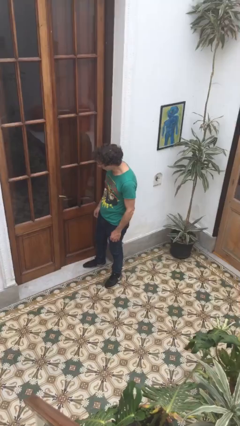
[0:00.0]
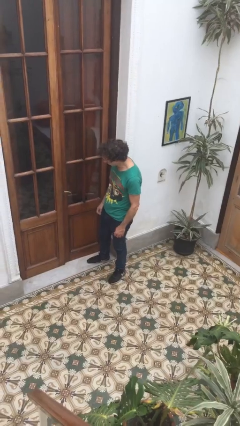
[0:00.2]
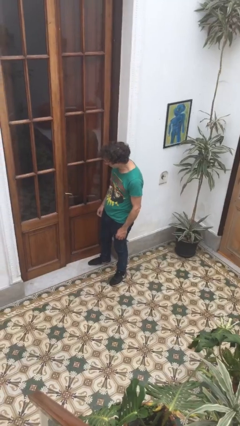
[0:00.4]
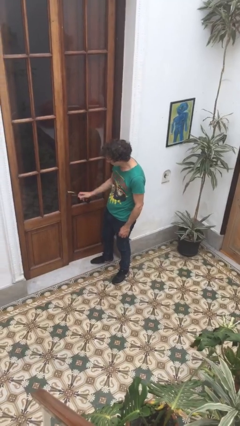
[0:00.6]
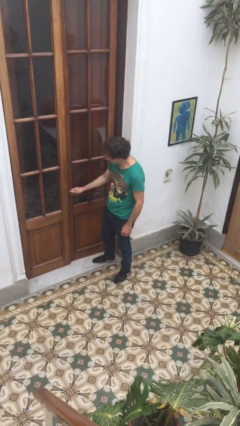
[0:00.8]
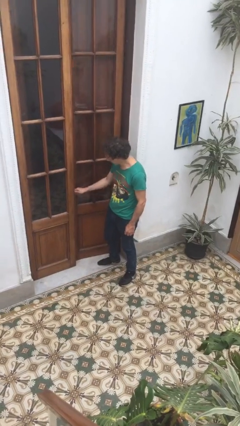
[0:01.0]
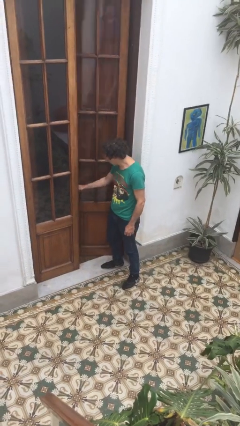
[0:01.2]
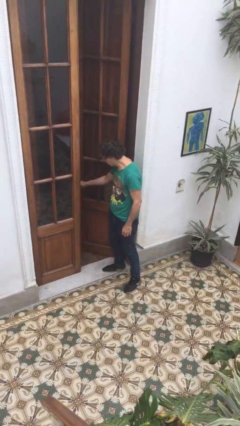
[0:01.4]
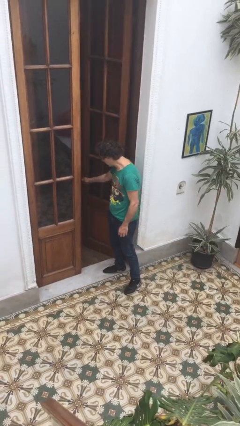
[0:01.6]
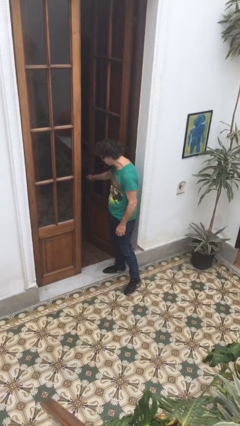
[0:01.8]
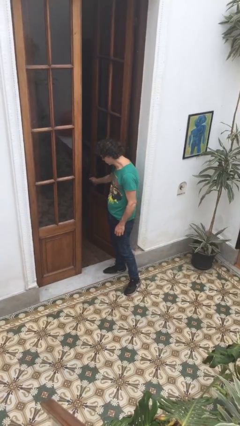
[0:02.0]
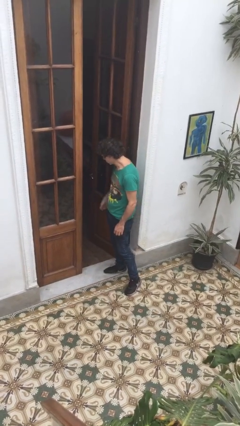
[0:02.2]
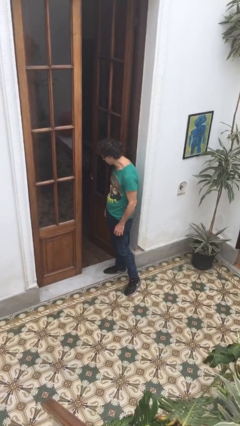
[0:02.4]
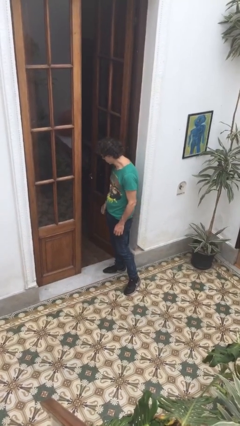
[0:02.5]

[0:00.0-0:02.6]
person opens facility door

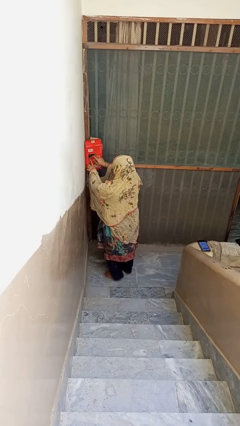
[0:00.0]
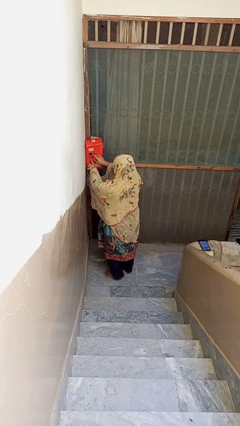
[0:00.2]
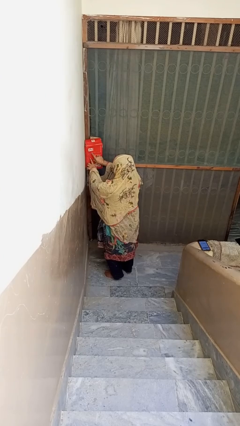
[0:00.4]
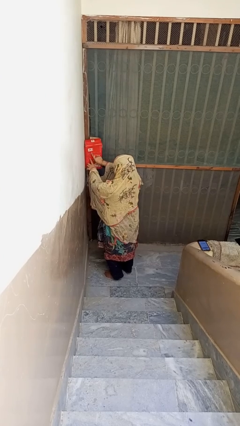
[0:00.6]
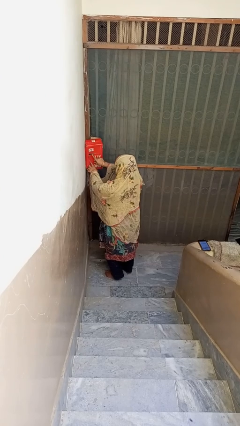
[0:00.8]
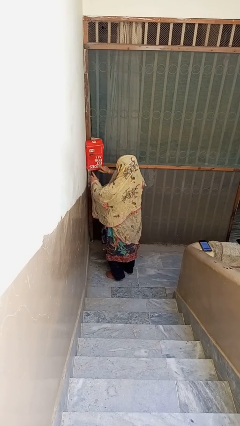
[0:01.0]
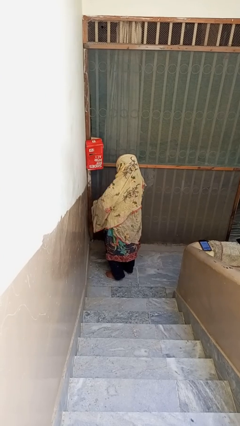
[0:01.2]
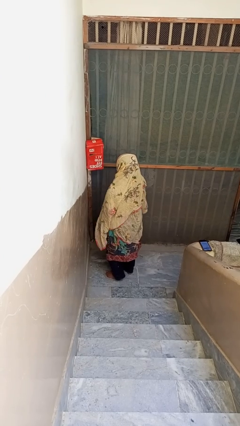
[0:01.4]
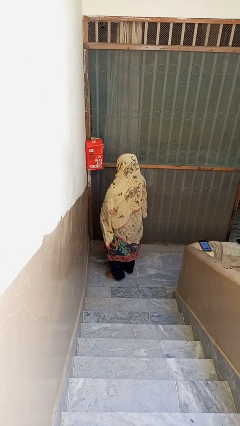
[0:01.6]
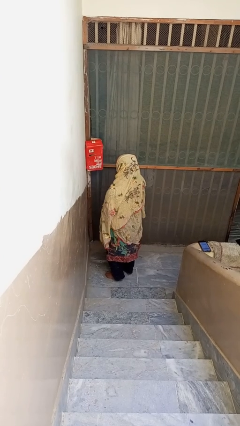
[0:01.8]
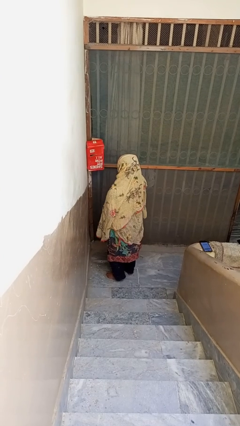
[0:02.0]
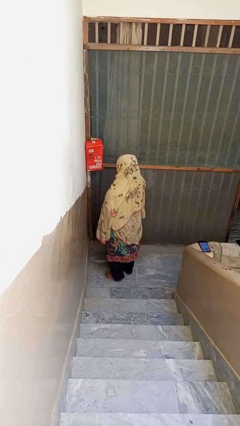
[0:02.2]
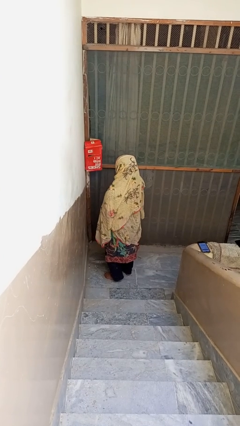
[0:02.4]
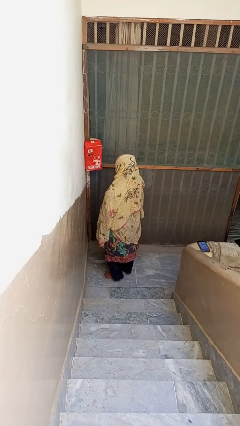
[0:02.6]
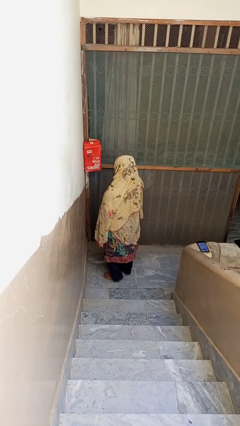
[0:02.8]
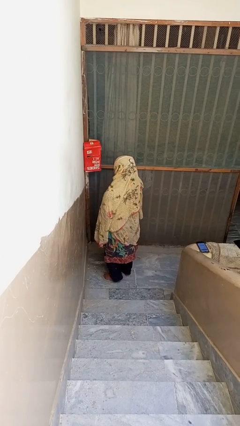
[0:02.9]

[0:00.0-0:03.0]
person closes mailbox

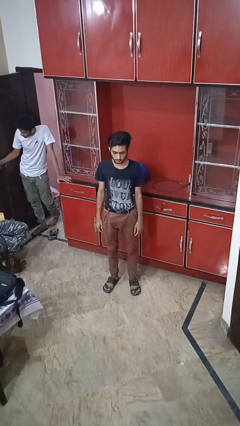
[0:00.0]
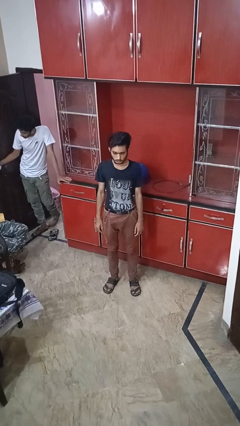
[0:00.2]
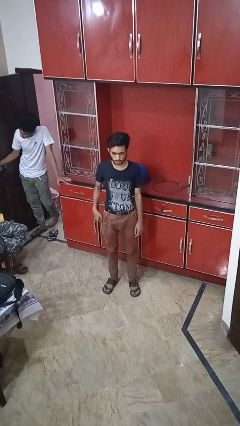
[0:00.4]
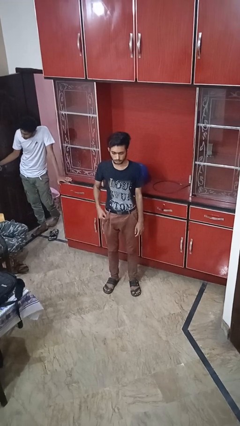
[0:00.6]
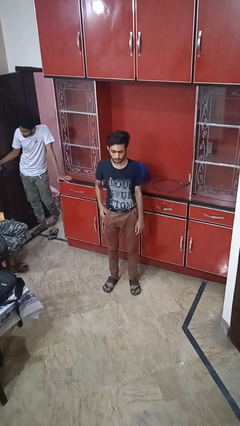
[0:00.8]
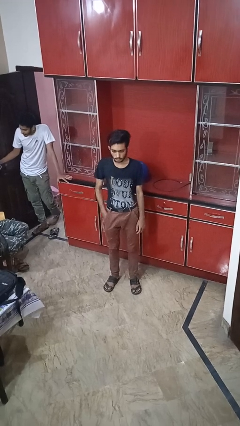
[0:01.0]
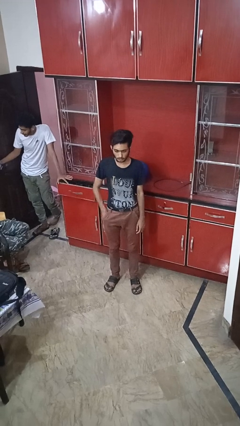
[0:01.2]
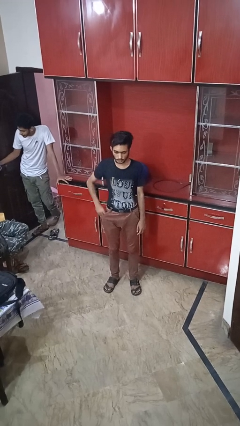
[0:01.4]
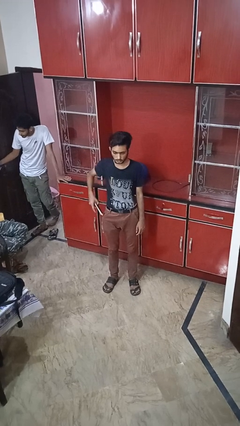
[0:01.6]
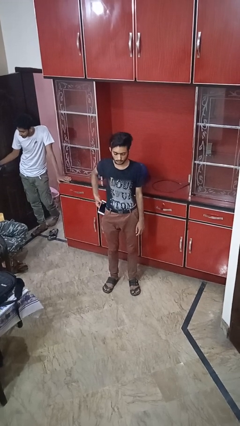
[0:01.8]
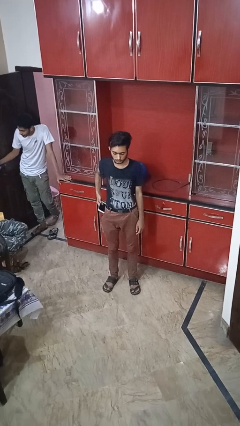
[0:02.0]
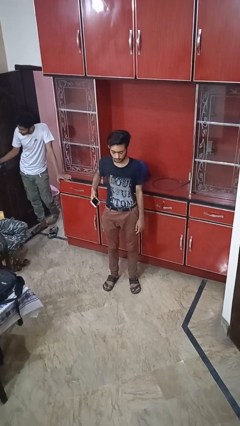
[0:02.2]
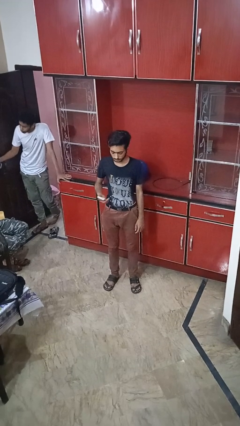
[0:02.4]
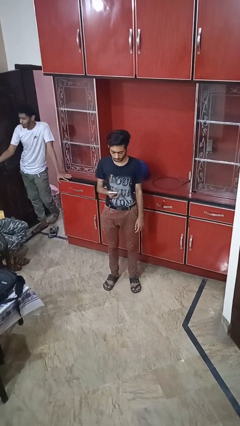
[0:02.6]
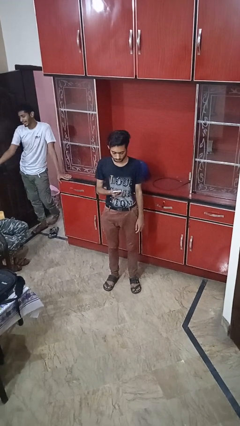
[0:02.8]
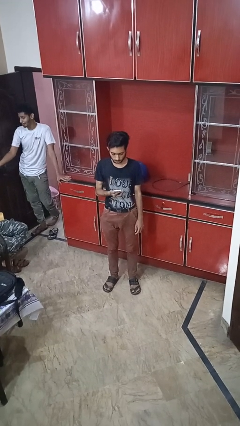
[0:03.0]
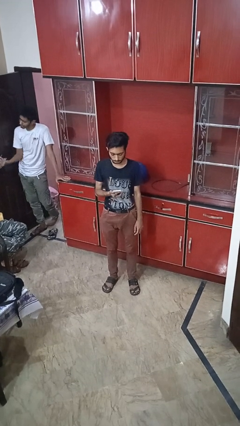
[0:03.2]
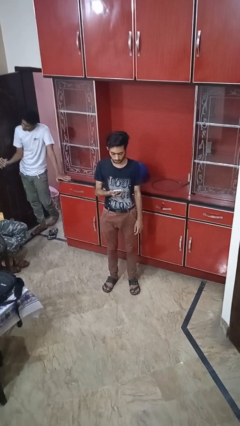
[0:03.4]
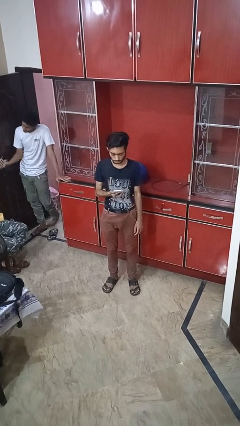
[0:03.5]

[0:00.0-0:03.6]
person takes phone from pocket

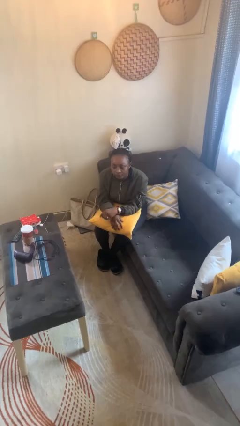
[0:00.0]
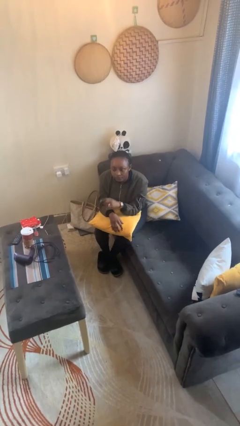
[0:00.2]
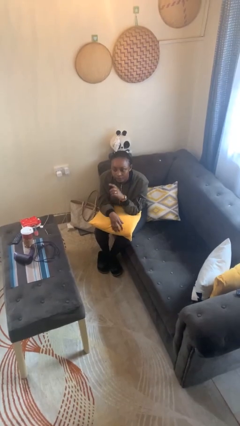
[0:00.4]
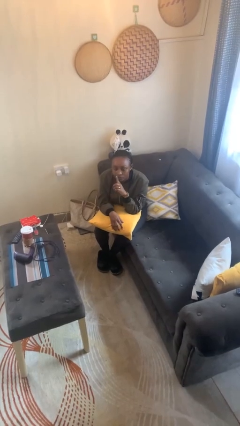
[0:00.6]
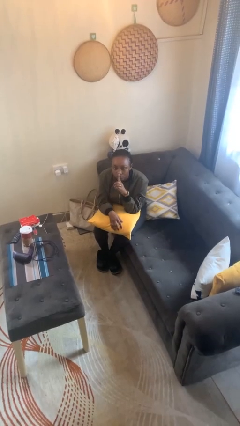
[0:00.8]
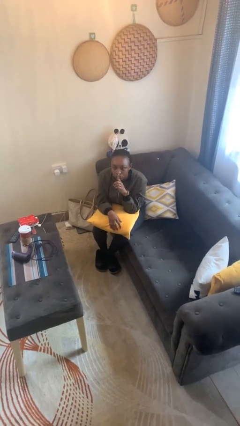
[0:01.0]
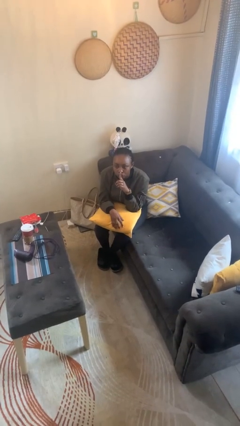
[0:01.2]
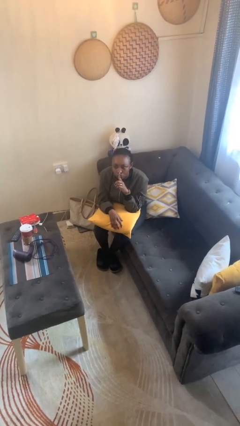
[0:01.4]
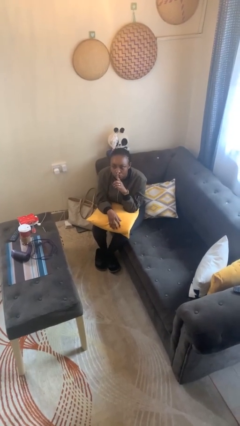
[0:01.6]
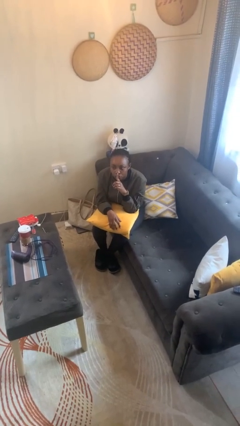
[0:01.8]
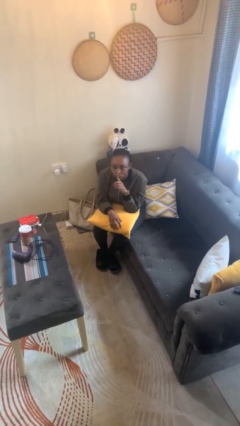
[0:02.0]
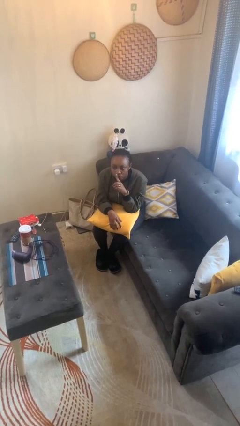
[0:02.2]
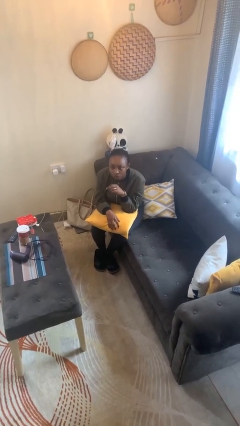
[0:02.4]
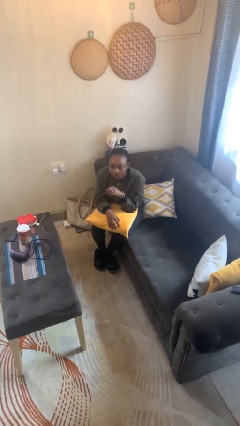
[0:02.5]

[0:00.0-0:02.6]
person gestures be quiet

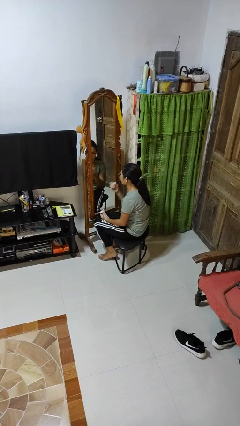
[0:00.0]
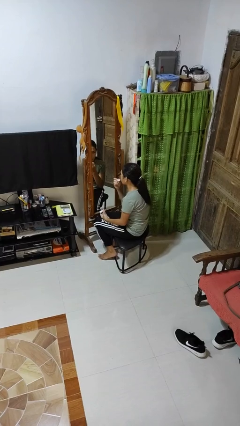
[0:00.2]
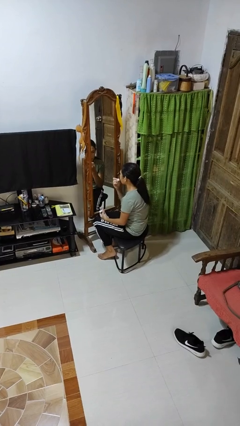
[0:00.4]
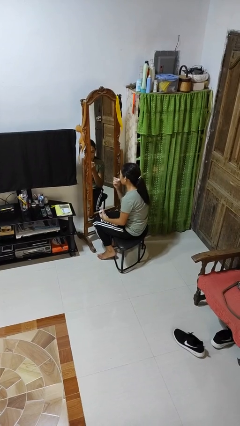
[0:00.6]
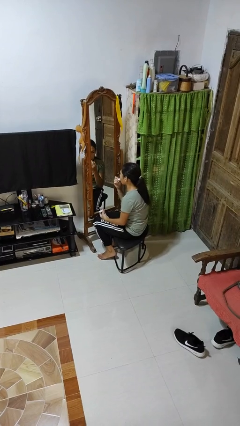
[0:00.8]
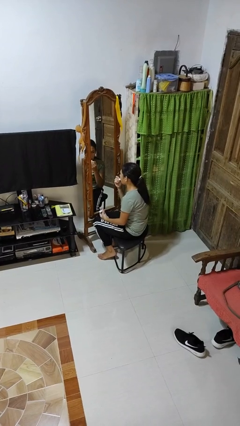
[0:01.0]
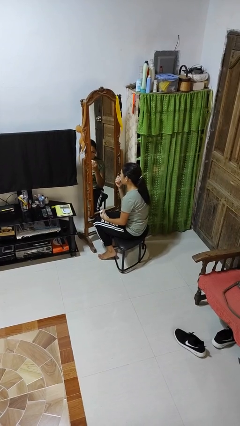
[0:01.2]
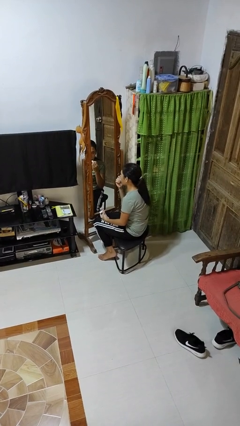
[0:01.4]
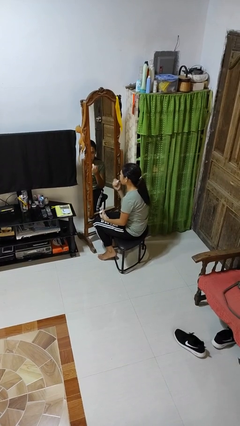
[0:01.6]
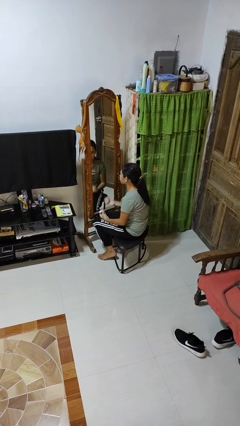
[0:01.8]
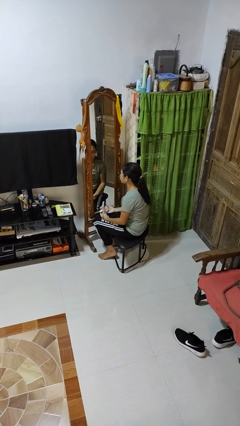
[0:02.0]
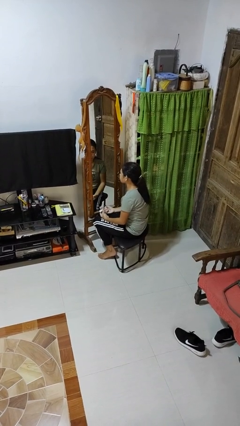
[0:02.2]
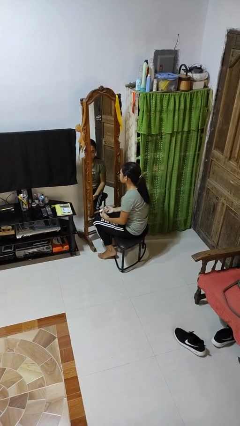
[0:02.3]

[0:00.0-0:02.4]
person applies lip makeup

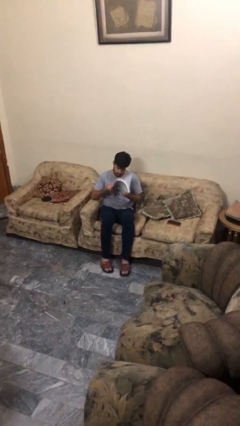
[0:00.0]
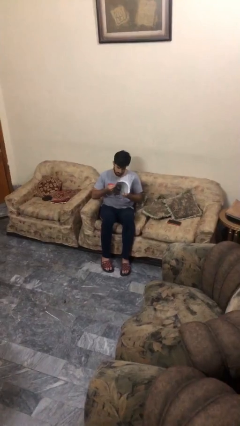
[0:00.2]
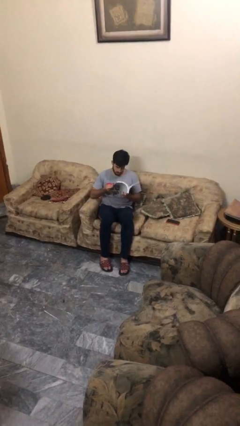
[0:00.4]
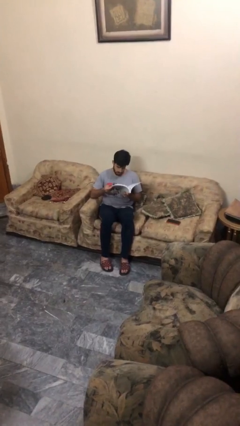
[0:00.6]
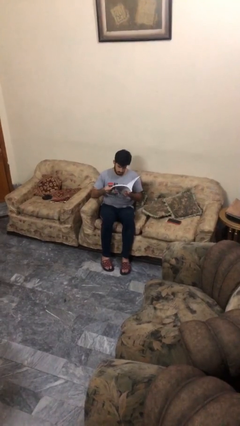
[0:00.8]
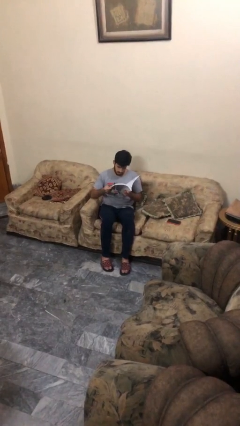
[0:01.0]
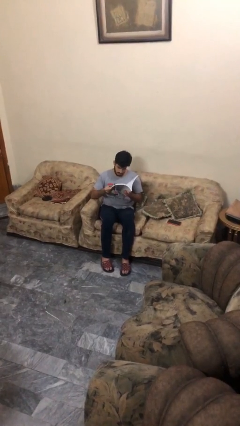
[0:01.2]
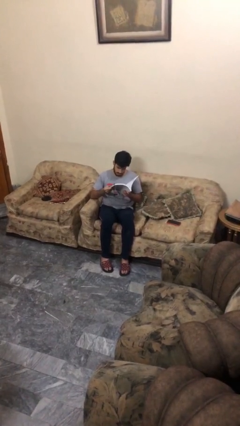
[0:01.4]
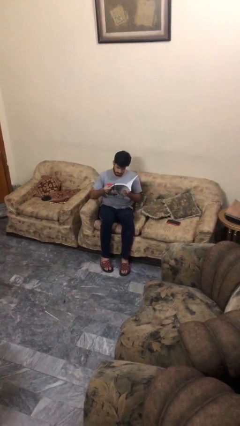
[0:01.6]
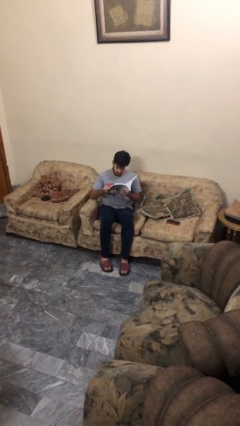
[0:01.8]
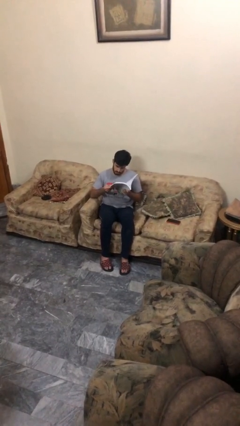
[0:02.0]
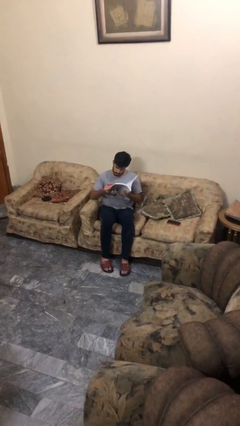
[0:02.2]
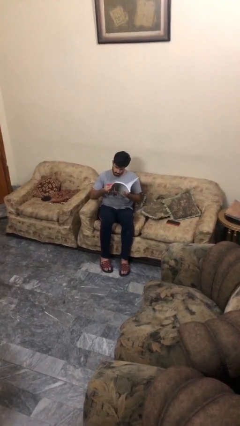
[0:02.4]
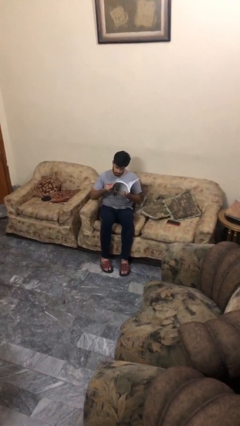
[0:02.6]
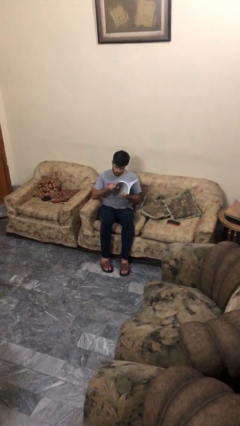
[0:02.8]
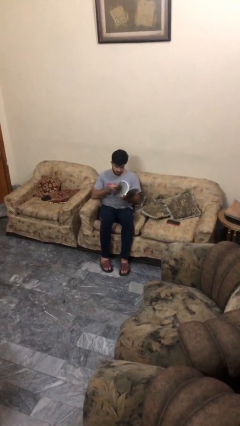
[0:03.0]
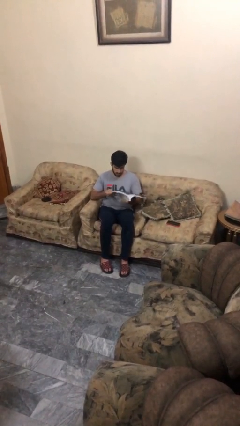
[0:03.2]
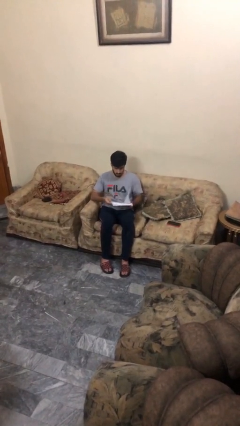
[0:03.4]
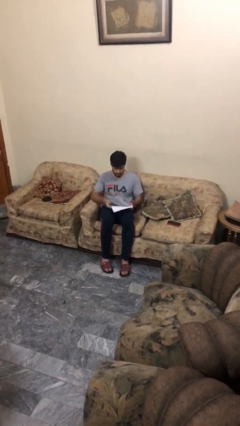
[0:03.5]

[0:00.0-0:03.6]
person reads book
